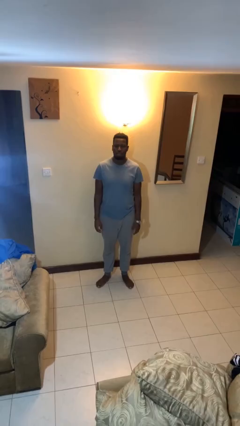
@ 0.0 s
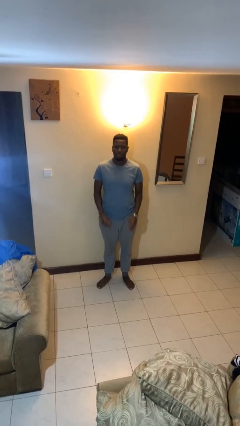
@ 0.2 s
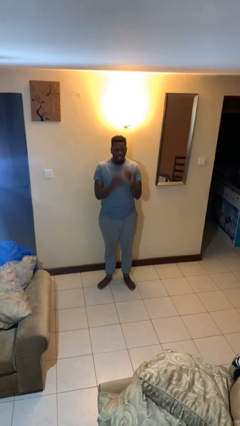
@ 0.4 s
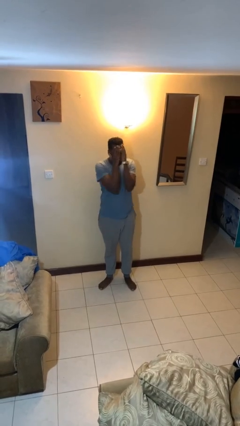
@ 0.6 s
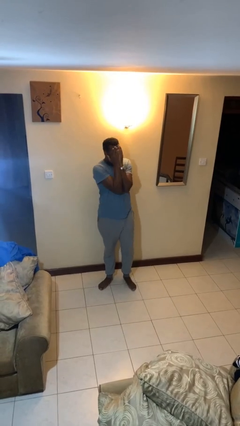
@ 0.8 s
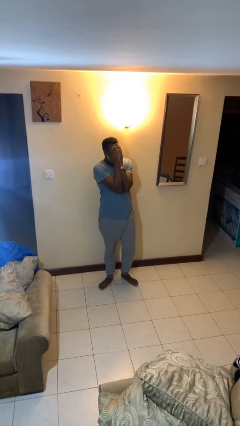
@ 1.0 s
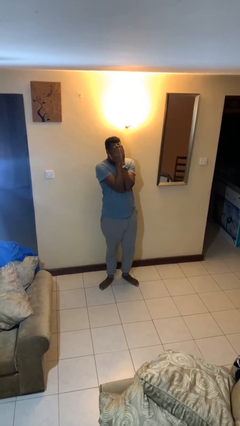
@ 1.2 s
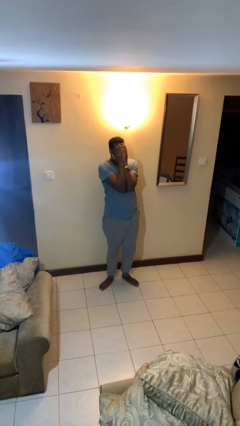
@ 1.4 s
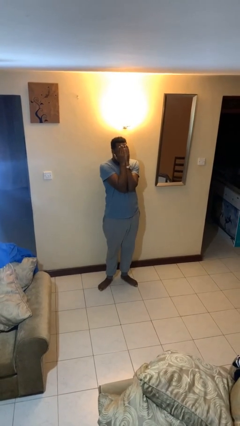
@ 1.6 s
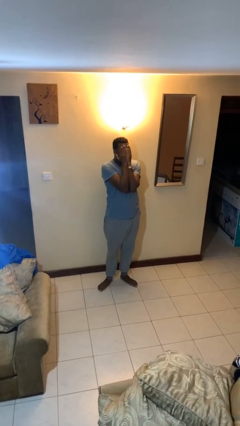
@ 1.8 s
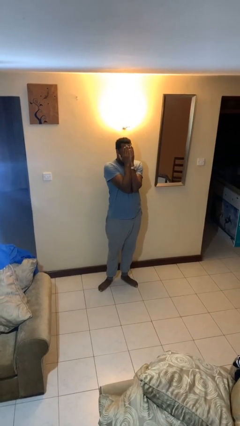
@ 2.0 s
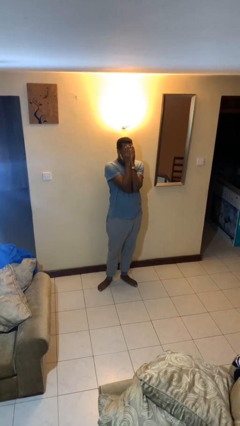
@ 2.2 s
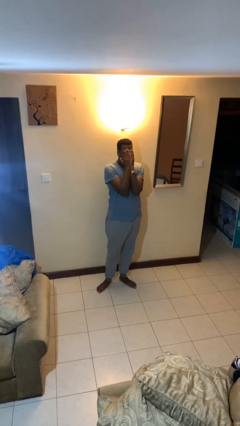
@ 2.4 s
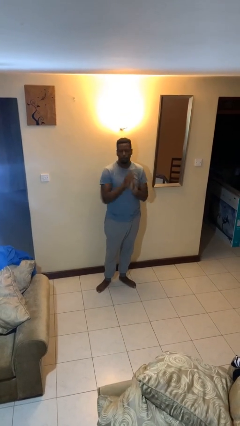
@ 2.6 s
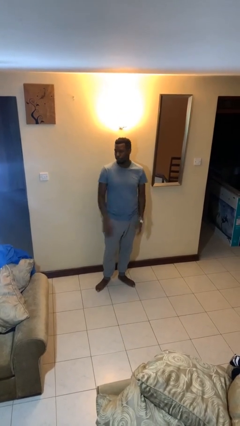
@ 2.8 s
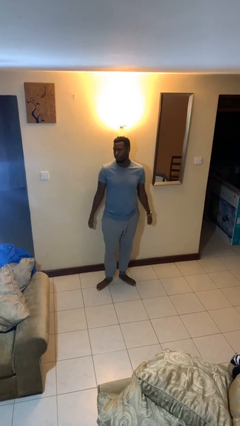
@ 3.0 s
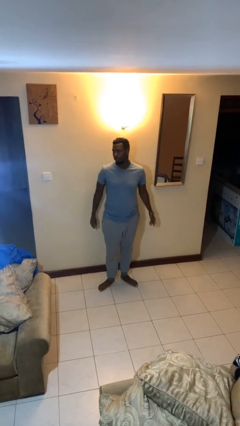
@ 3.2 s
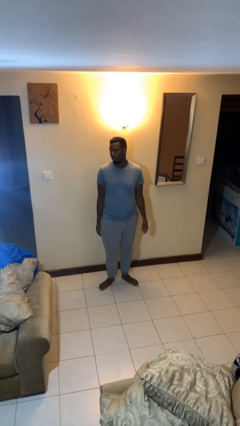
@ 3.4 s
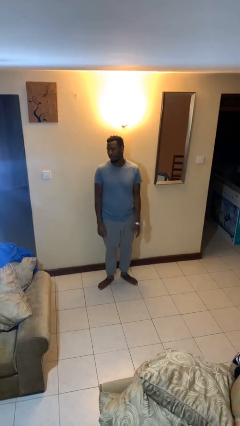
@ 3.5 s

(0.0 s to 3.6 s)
person covers face with hands

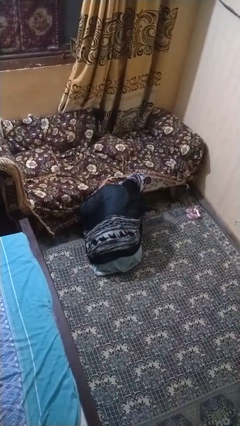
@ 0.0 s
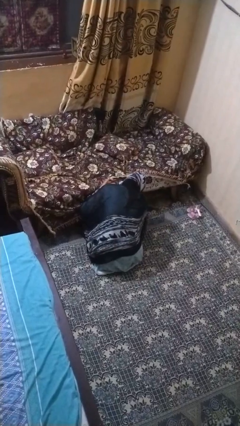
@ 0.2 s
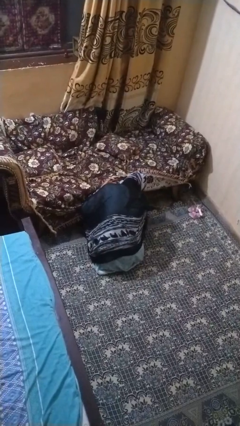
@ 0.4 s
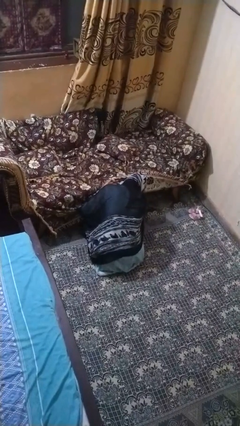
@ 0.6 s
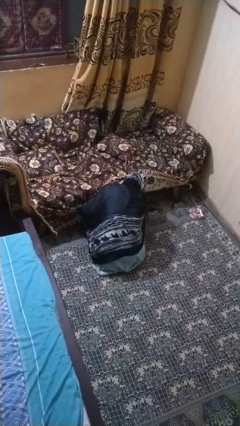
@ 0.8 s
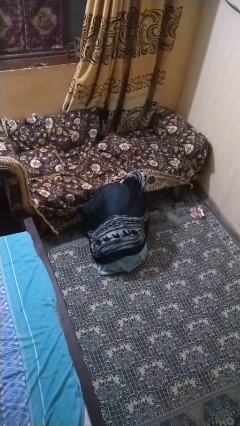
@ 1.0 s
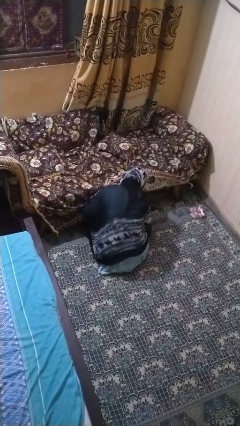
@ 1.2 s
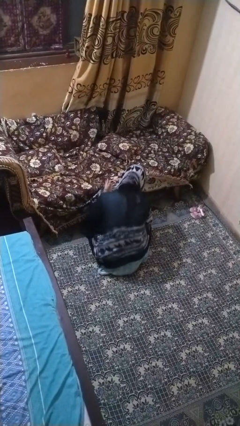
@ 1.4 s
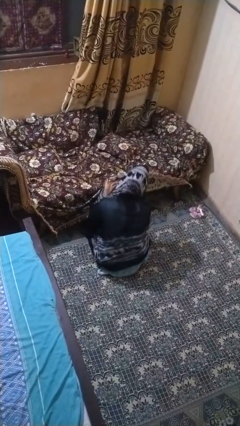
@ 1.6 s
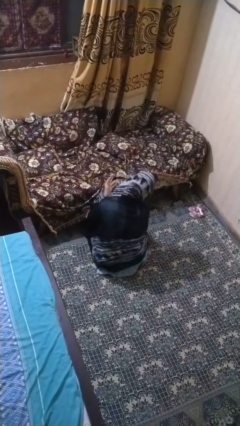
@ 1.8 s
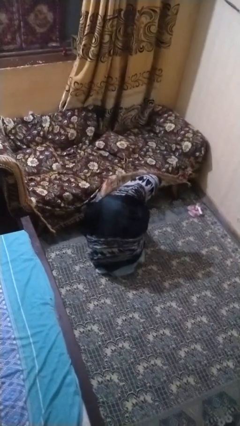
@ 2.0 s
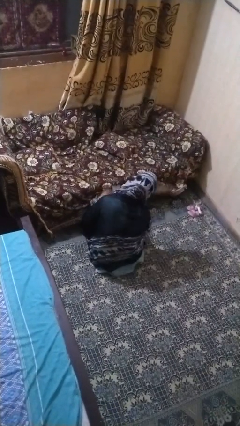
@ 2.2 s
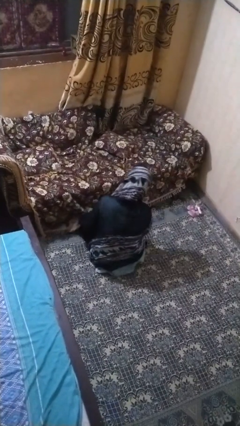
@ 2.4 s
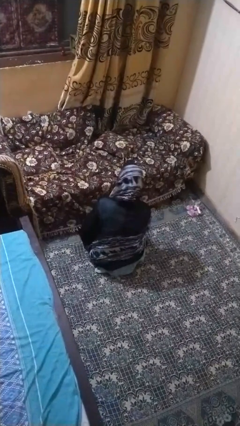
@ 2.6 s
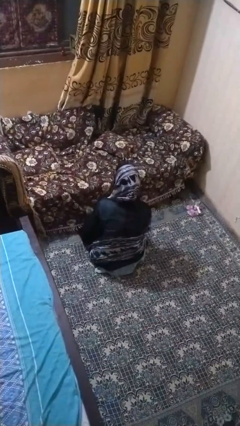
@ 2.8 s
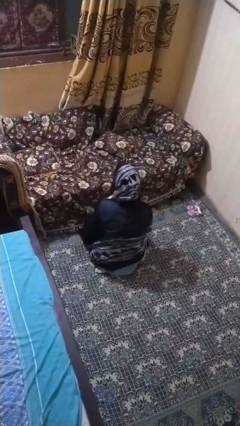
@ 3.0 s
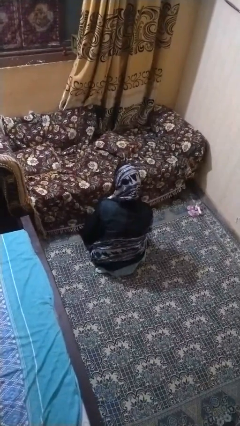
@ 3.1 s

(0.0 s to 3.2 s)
person searches under couch

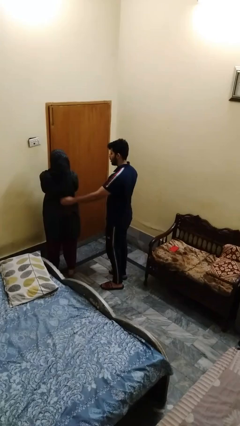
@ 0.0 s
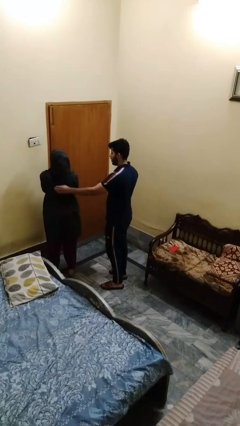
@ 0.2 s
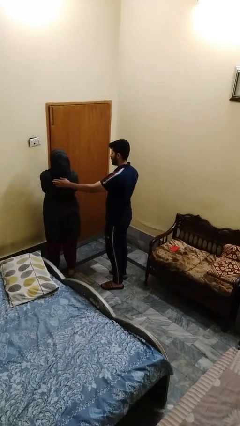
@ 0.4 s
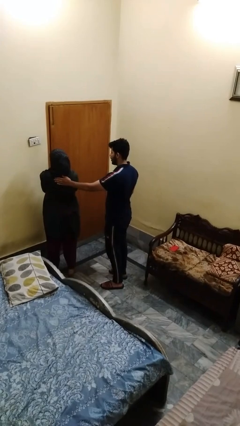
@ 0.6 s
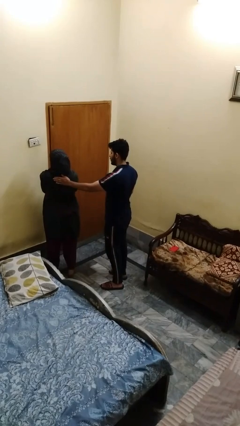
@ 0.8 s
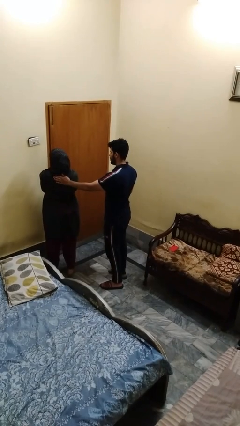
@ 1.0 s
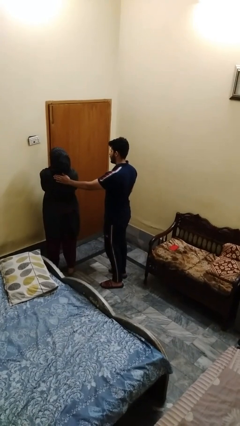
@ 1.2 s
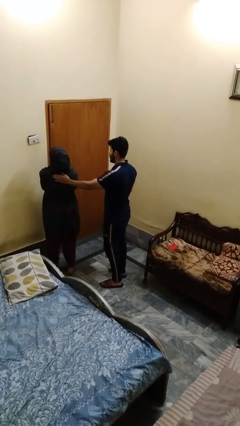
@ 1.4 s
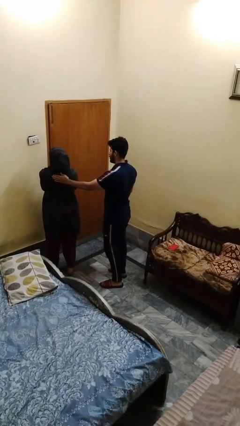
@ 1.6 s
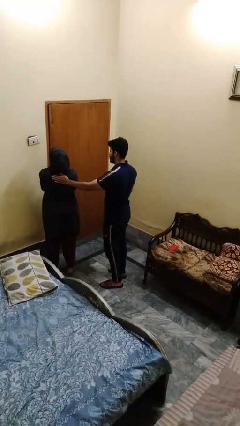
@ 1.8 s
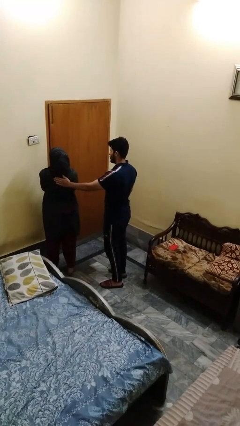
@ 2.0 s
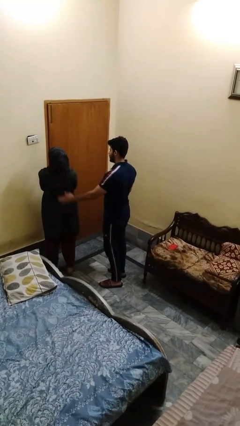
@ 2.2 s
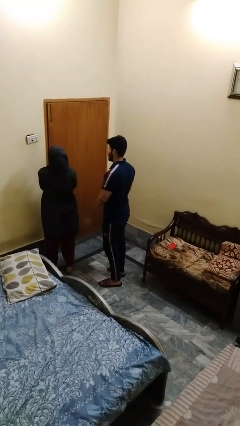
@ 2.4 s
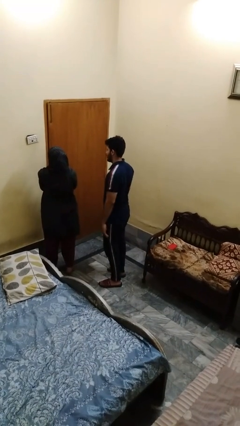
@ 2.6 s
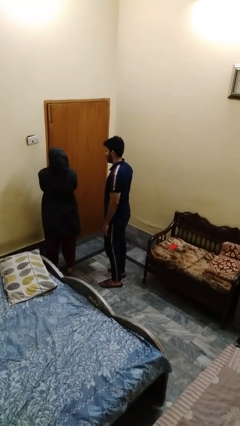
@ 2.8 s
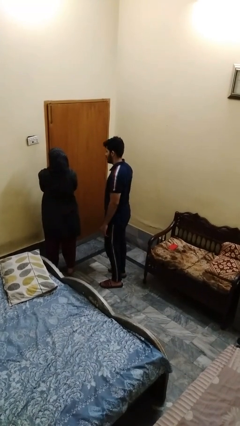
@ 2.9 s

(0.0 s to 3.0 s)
person touches back of person

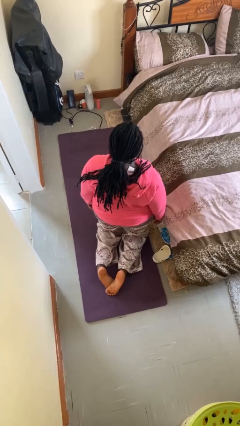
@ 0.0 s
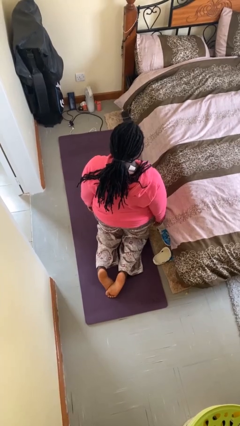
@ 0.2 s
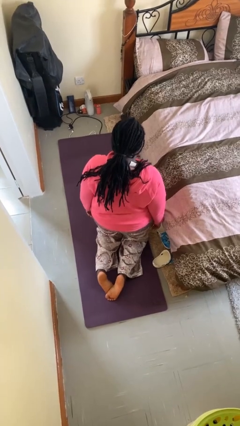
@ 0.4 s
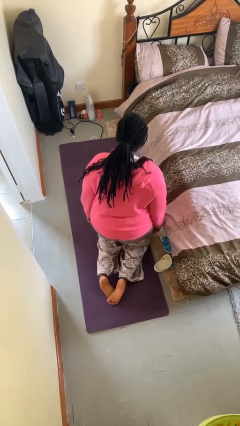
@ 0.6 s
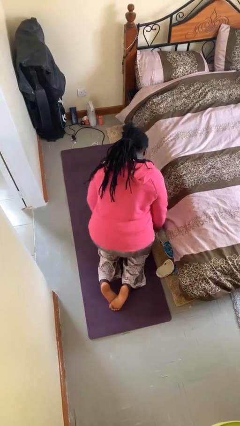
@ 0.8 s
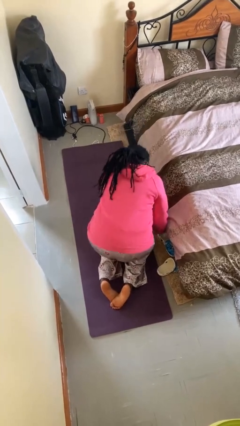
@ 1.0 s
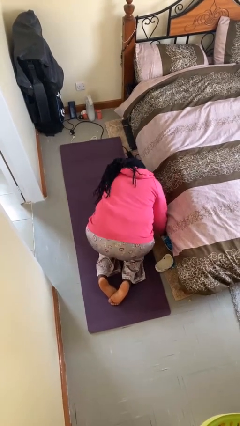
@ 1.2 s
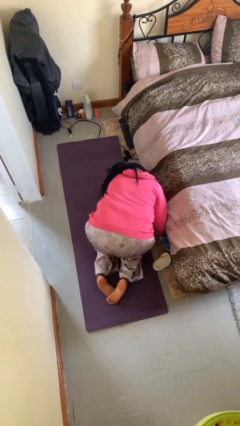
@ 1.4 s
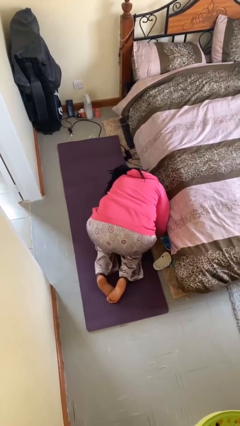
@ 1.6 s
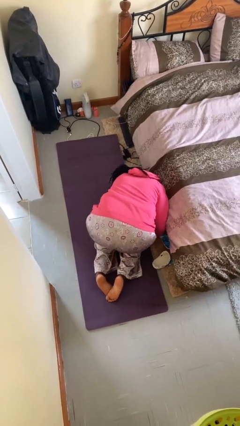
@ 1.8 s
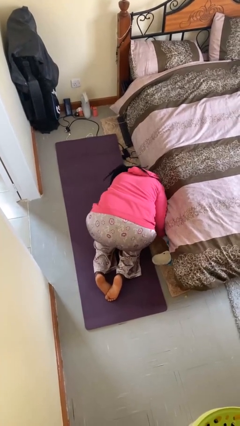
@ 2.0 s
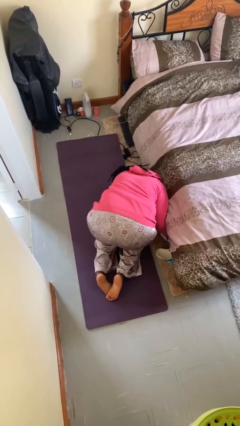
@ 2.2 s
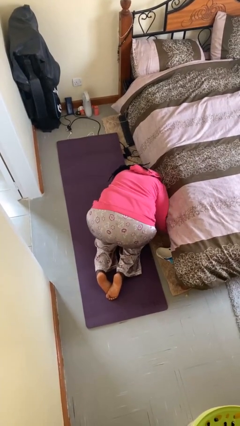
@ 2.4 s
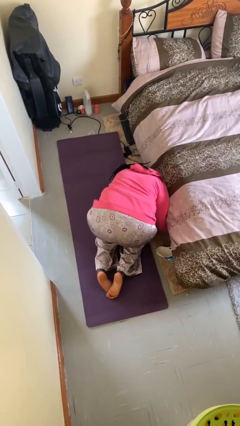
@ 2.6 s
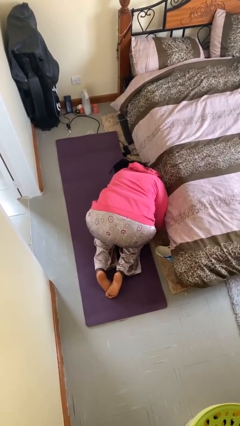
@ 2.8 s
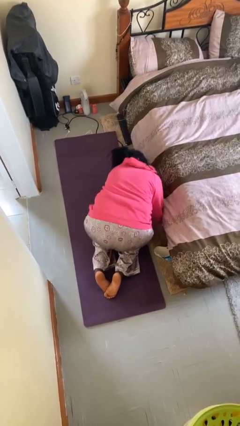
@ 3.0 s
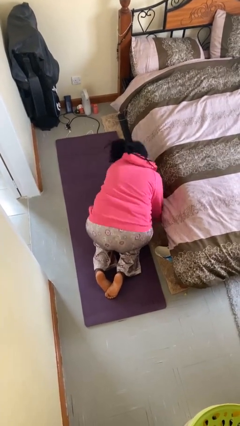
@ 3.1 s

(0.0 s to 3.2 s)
person searches under bed

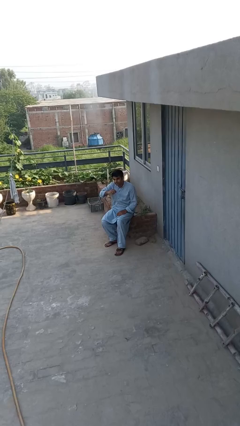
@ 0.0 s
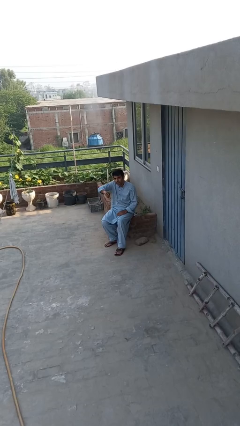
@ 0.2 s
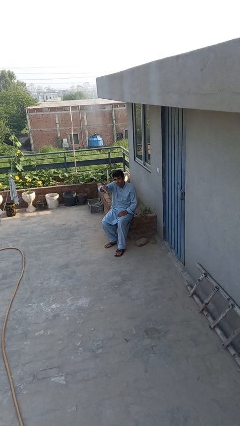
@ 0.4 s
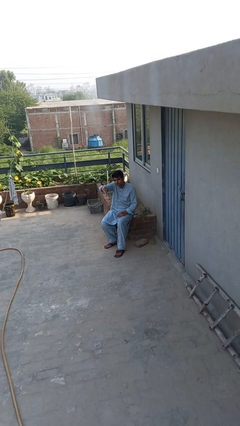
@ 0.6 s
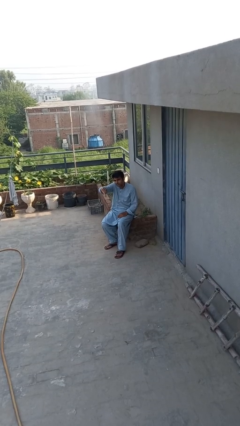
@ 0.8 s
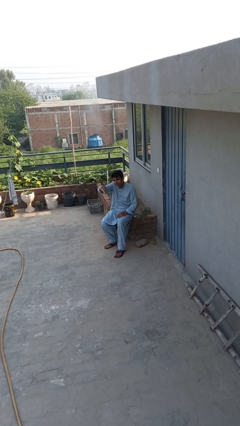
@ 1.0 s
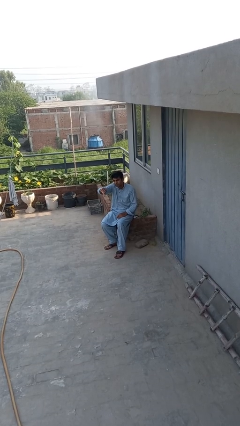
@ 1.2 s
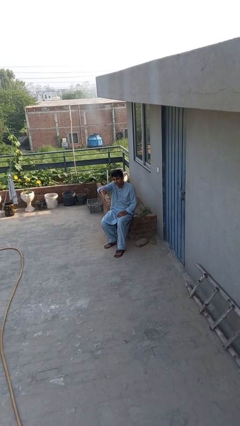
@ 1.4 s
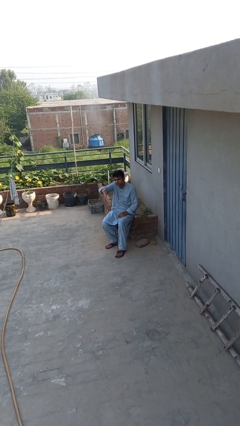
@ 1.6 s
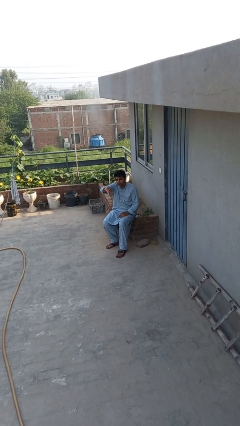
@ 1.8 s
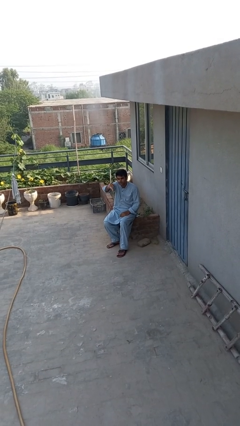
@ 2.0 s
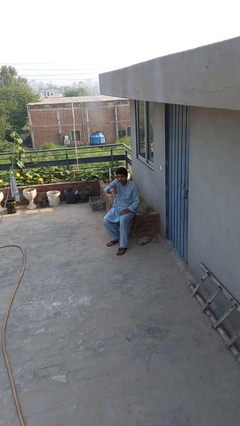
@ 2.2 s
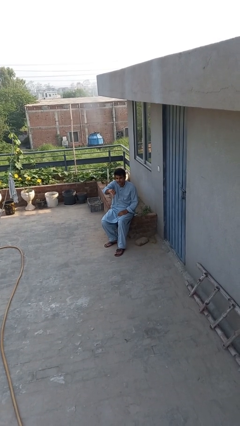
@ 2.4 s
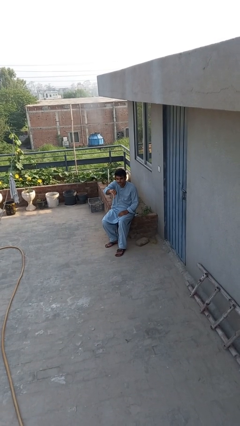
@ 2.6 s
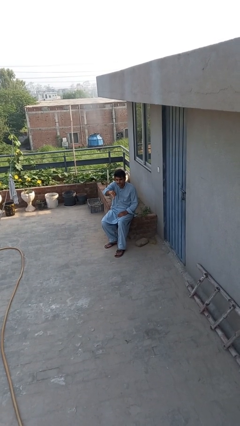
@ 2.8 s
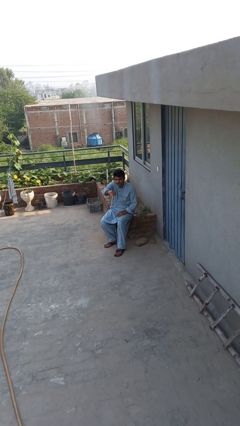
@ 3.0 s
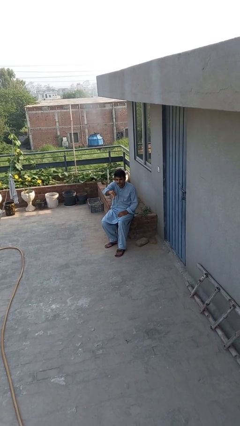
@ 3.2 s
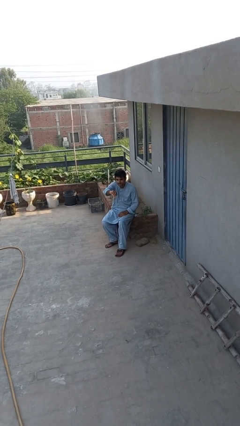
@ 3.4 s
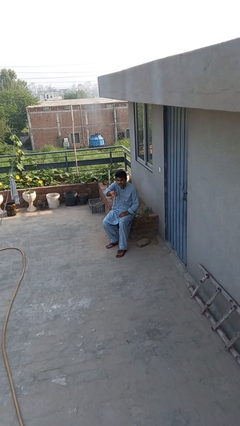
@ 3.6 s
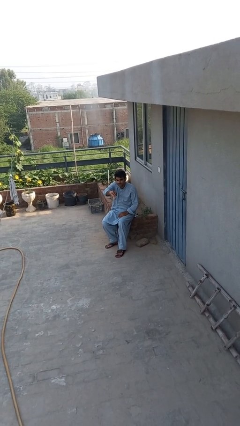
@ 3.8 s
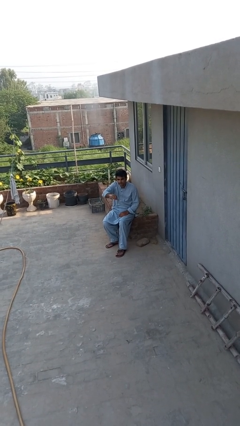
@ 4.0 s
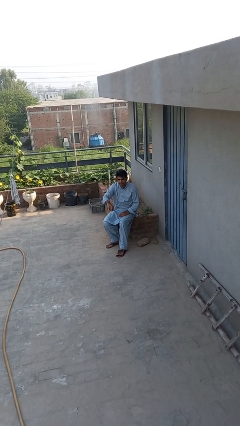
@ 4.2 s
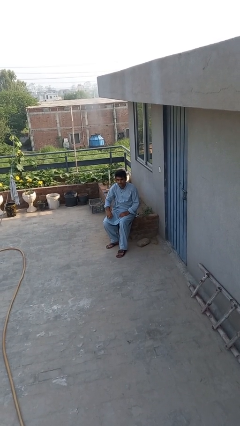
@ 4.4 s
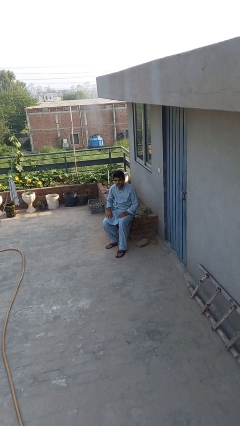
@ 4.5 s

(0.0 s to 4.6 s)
person gestures thumbs down
